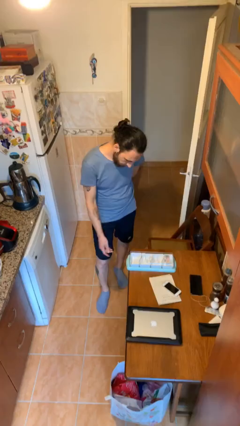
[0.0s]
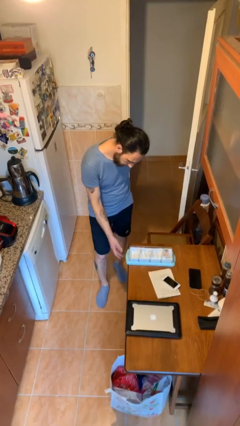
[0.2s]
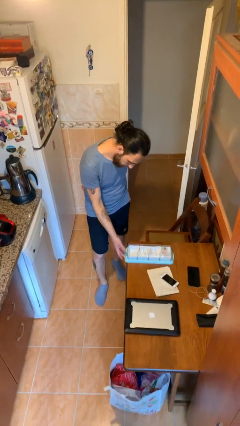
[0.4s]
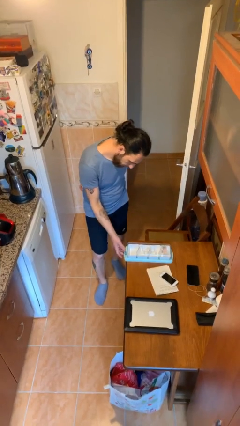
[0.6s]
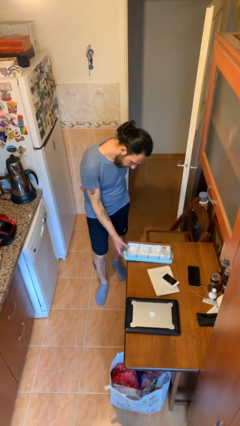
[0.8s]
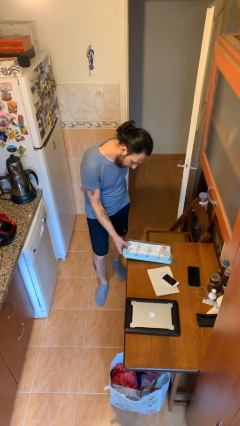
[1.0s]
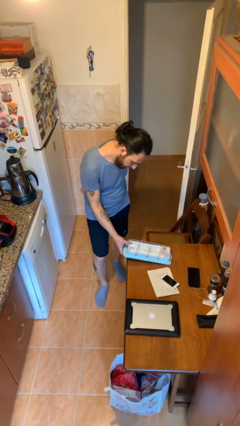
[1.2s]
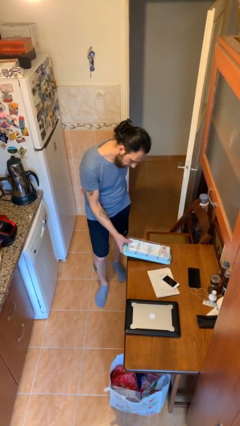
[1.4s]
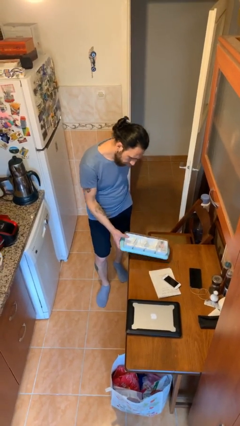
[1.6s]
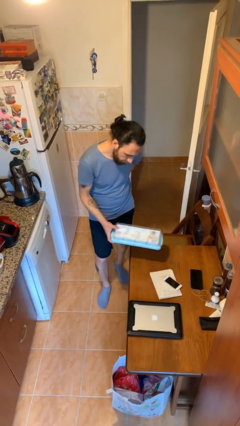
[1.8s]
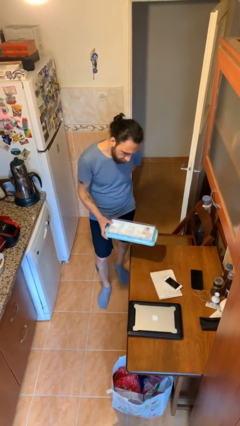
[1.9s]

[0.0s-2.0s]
person picks up object from table

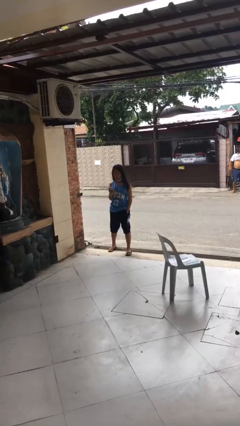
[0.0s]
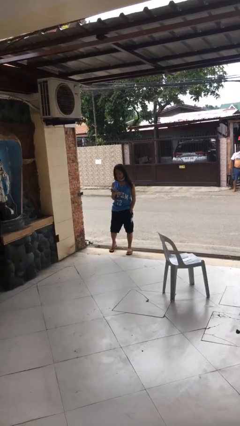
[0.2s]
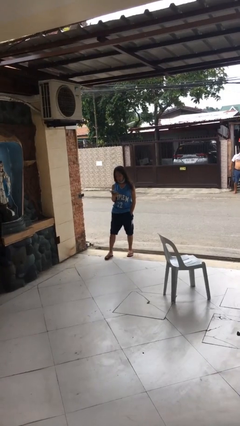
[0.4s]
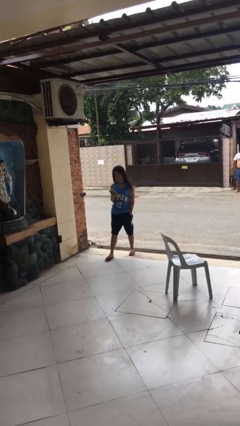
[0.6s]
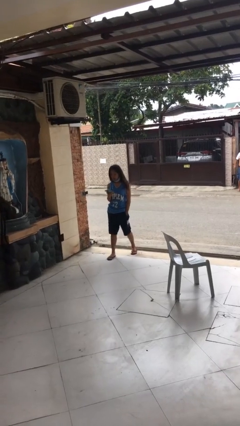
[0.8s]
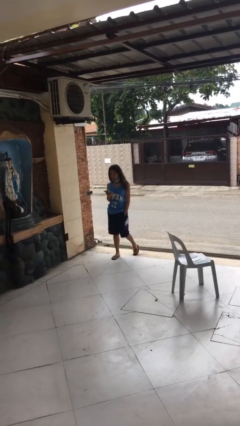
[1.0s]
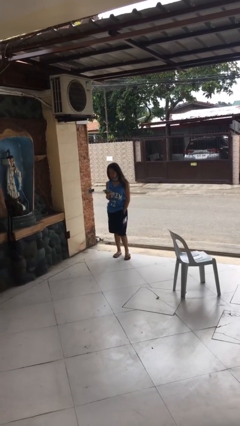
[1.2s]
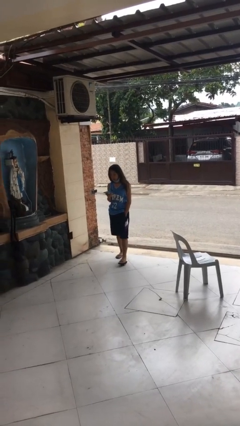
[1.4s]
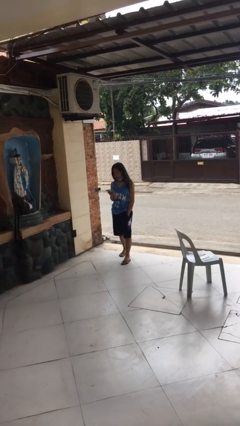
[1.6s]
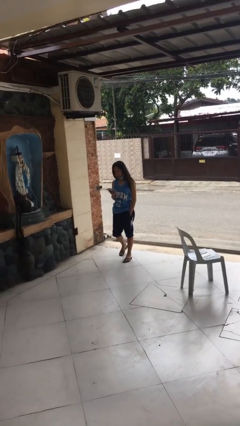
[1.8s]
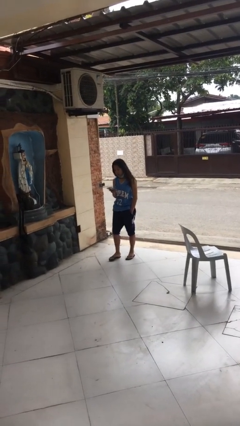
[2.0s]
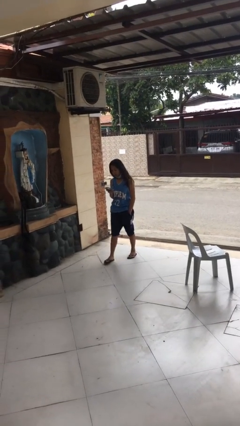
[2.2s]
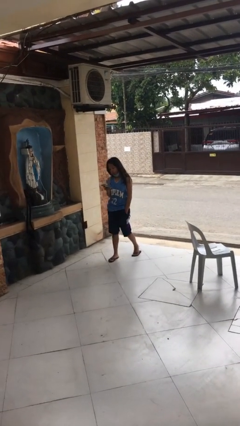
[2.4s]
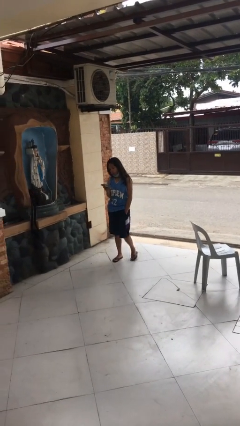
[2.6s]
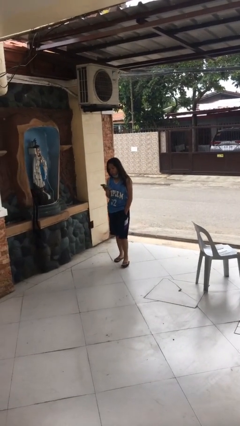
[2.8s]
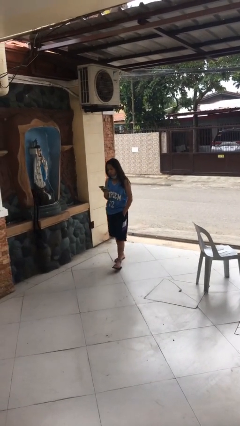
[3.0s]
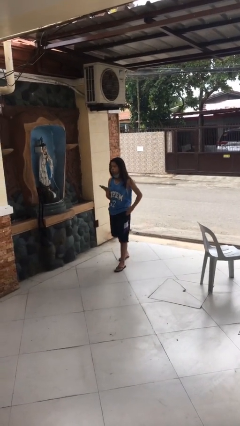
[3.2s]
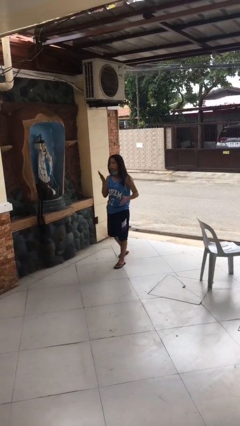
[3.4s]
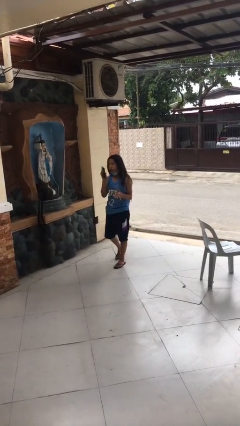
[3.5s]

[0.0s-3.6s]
person texts on phone

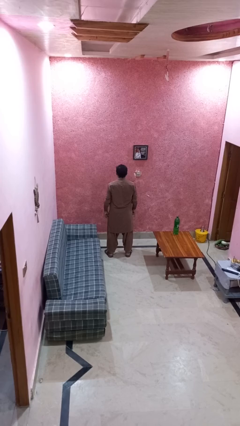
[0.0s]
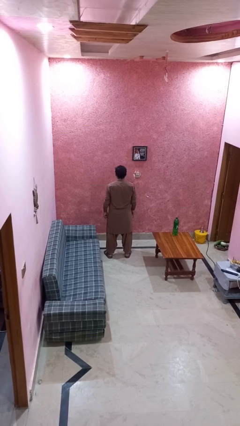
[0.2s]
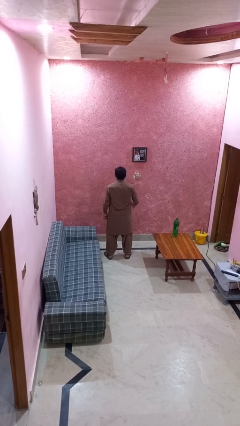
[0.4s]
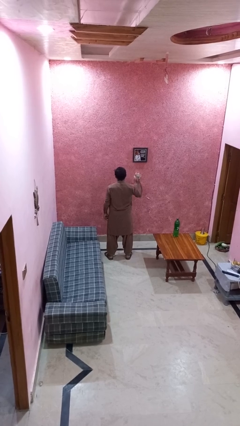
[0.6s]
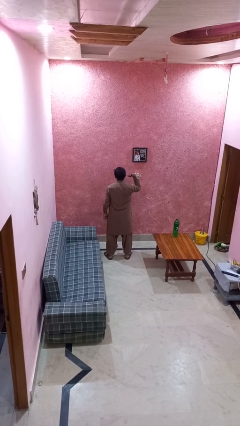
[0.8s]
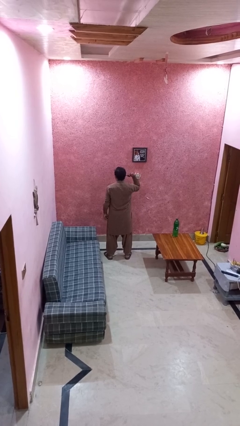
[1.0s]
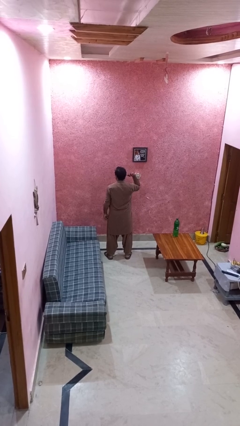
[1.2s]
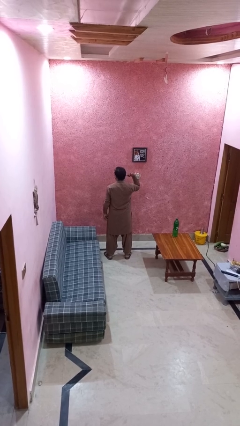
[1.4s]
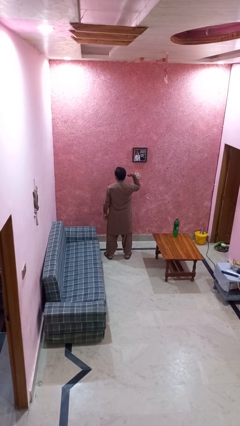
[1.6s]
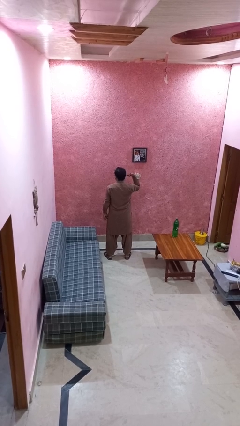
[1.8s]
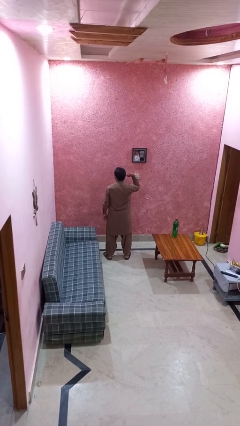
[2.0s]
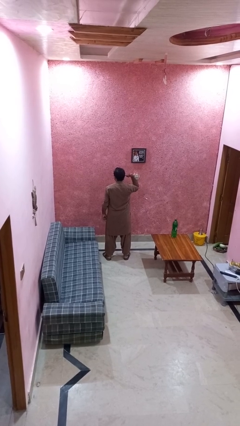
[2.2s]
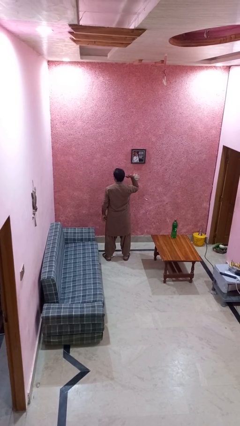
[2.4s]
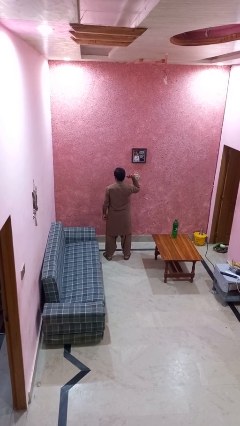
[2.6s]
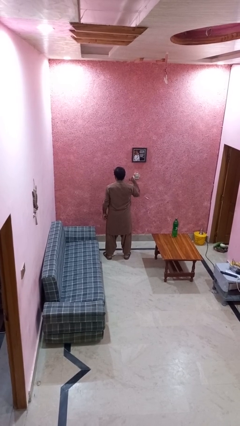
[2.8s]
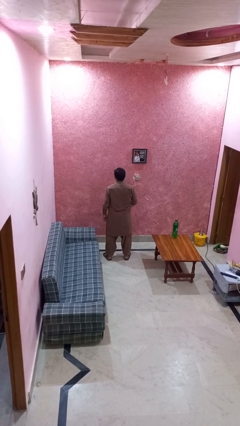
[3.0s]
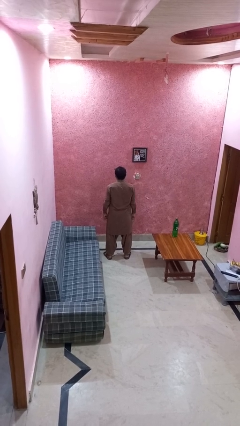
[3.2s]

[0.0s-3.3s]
person gestures call me

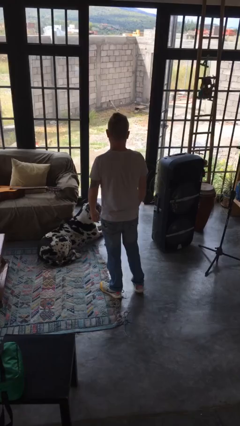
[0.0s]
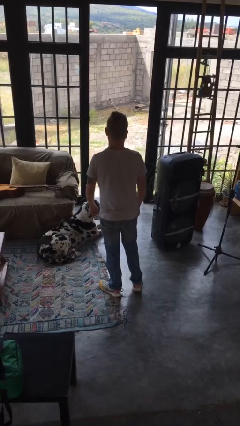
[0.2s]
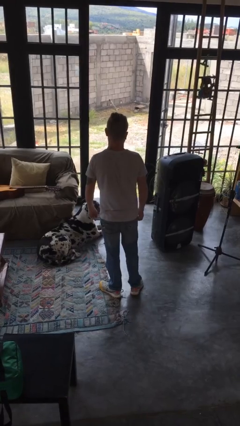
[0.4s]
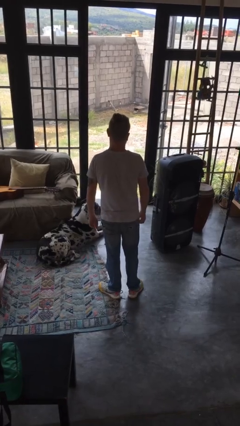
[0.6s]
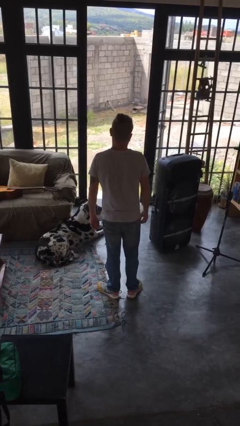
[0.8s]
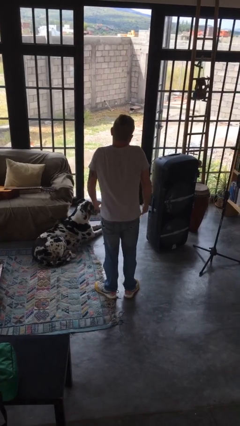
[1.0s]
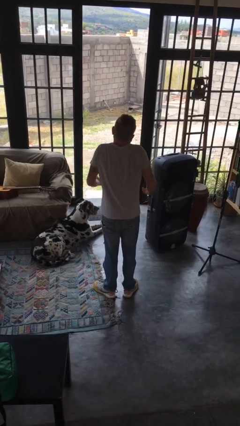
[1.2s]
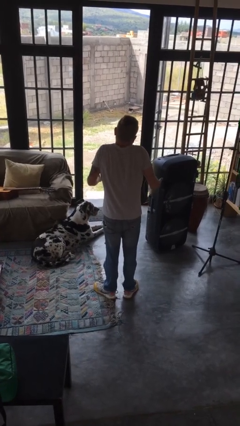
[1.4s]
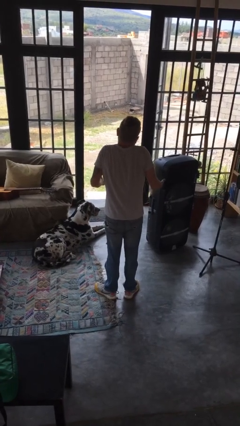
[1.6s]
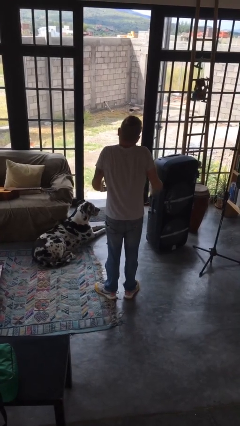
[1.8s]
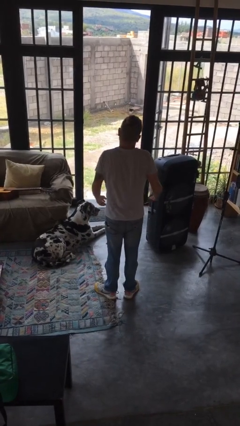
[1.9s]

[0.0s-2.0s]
person shrugs

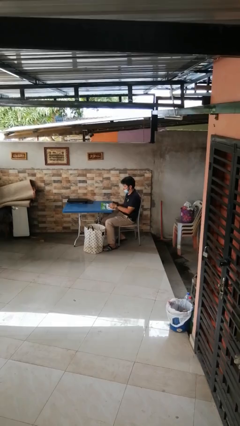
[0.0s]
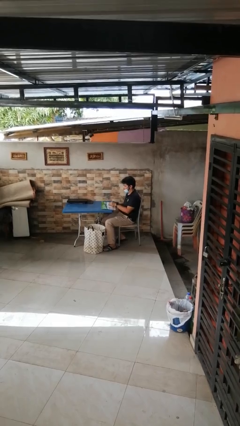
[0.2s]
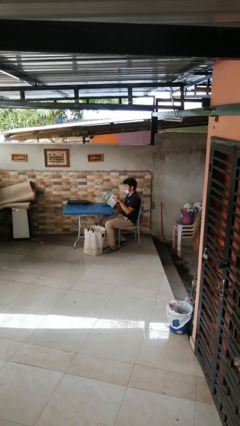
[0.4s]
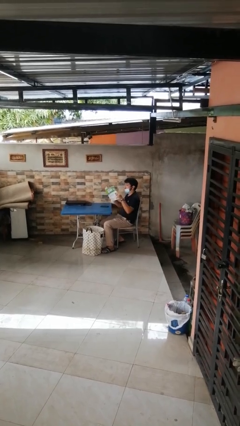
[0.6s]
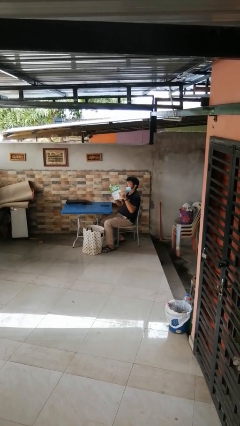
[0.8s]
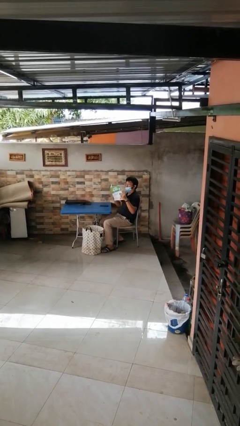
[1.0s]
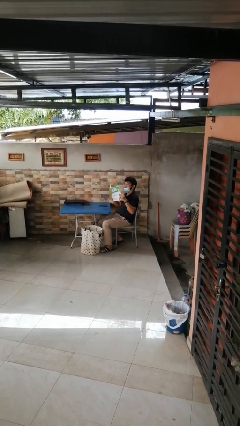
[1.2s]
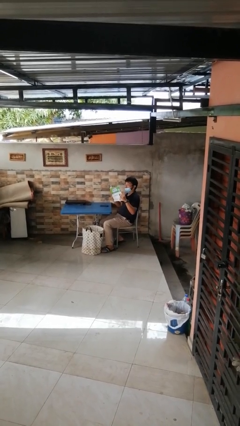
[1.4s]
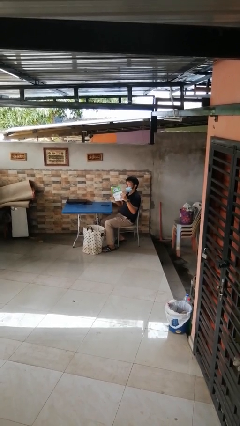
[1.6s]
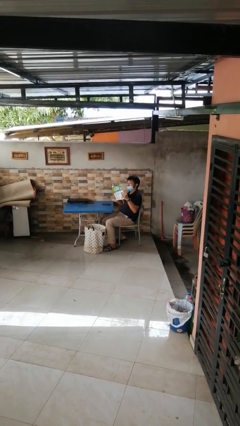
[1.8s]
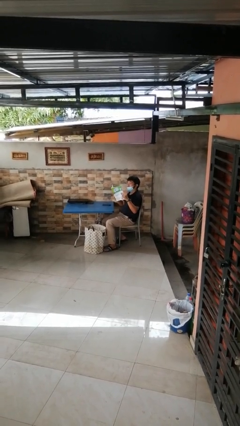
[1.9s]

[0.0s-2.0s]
person reads magazine

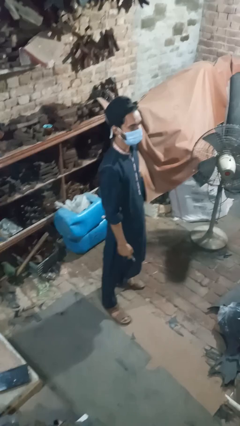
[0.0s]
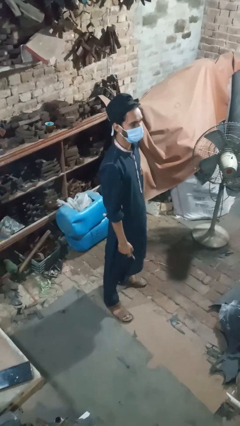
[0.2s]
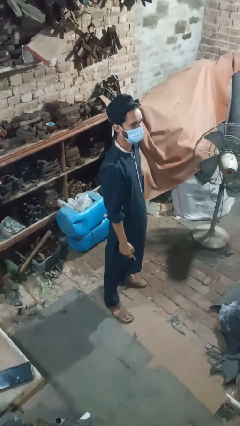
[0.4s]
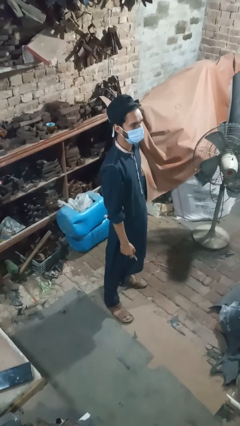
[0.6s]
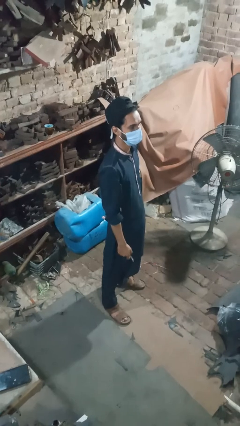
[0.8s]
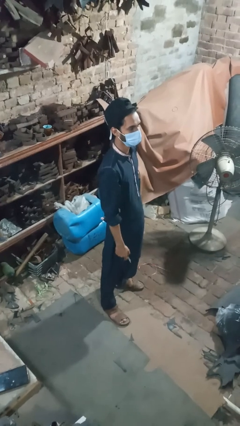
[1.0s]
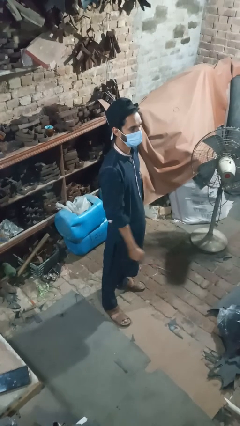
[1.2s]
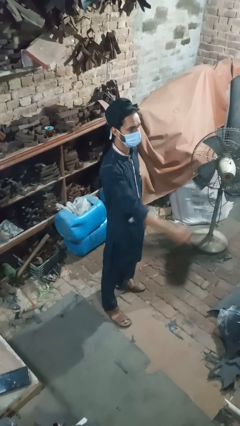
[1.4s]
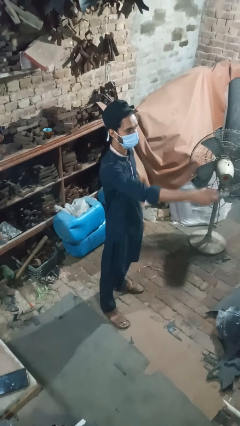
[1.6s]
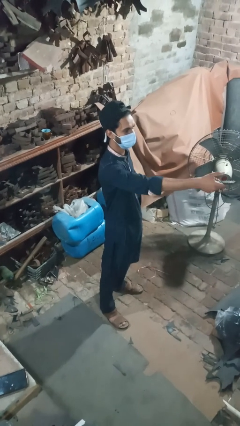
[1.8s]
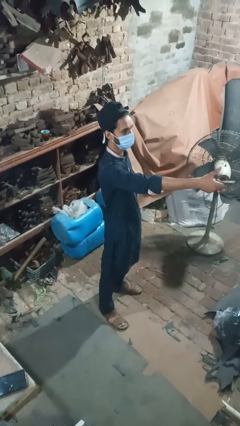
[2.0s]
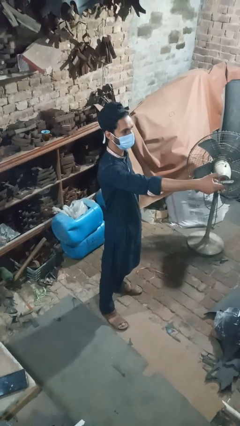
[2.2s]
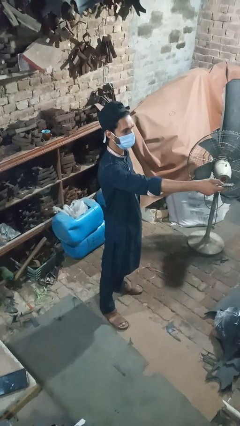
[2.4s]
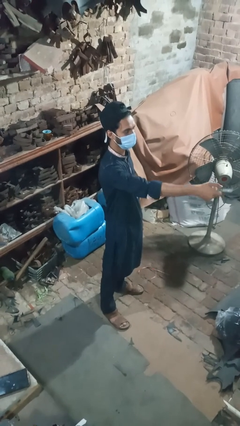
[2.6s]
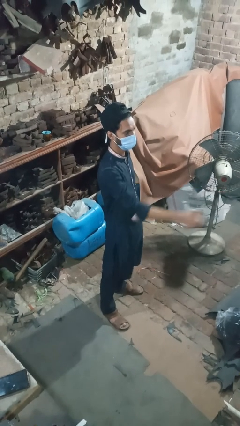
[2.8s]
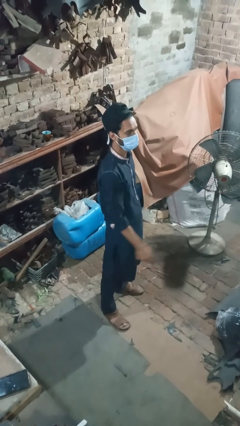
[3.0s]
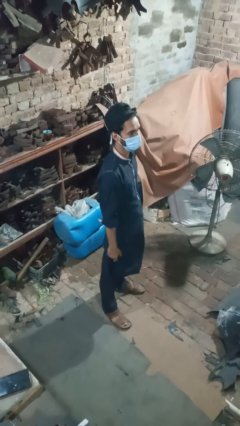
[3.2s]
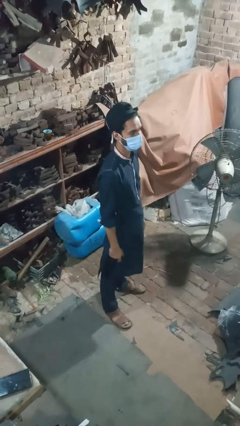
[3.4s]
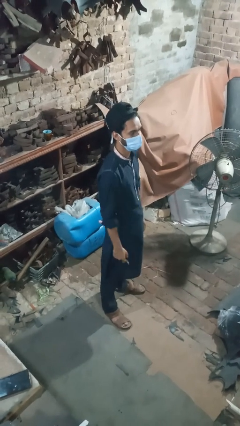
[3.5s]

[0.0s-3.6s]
person uses television remote

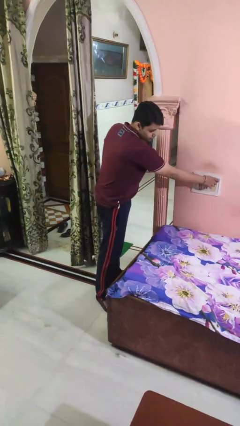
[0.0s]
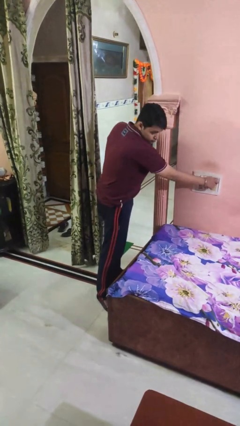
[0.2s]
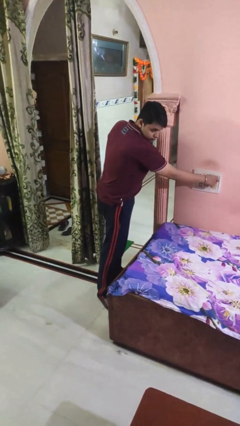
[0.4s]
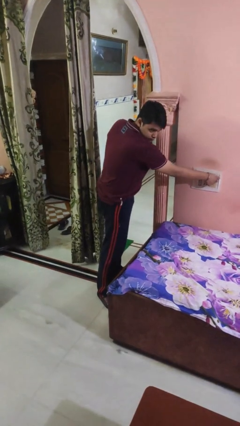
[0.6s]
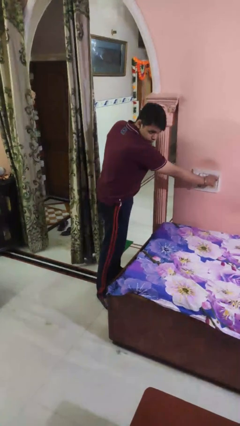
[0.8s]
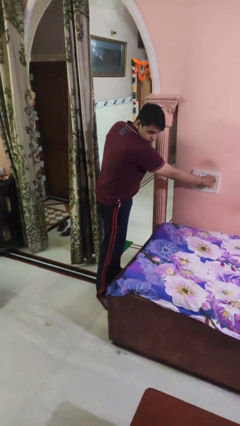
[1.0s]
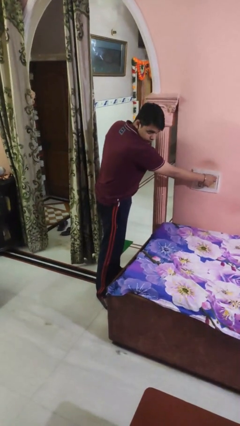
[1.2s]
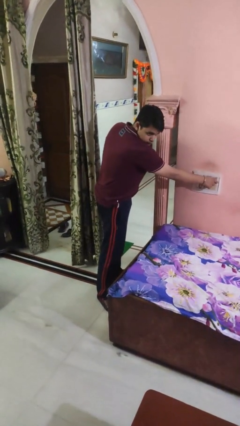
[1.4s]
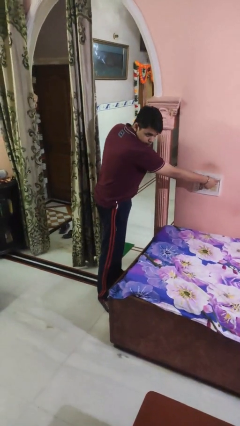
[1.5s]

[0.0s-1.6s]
person adjusts thermostat
